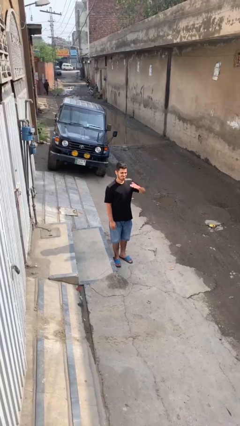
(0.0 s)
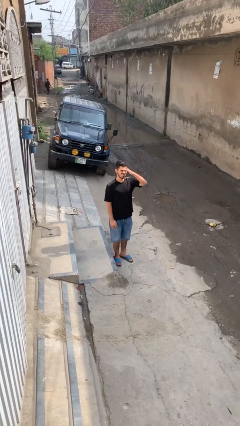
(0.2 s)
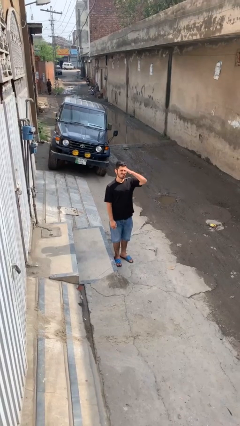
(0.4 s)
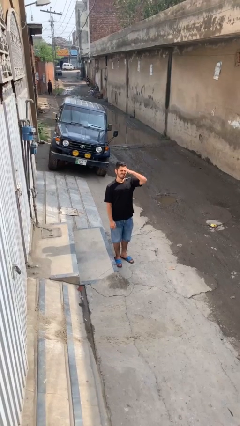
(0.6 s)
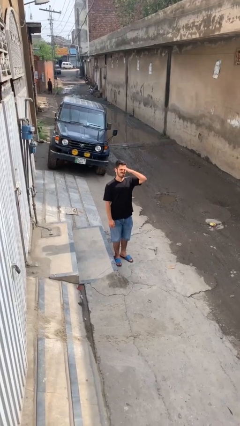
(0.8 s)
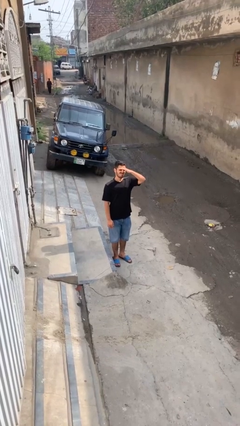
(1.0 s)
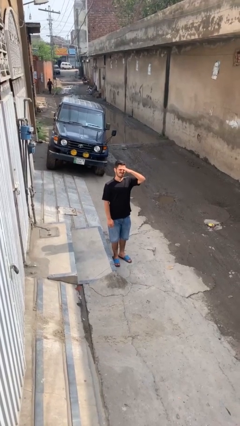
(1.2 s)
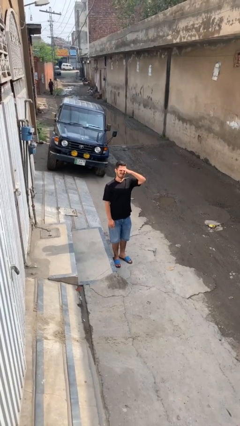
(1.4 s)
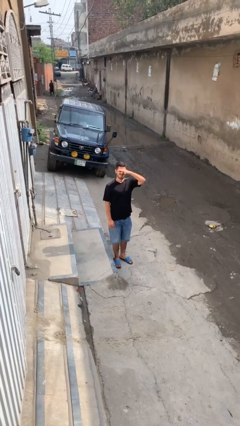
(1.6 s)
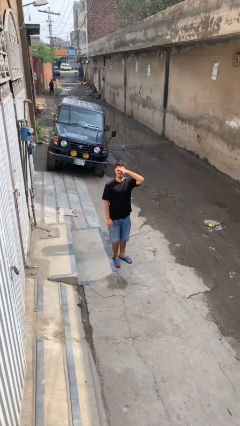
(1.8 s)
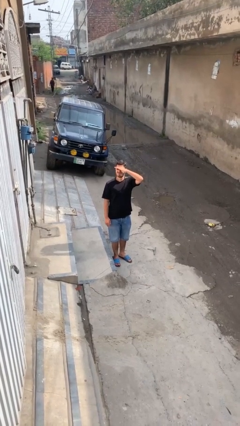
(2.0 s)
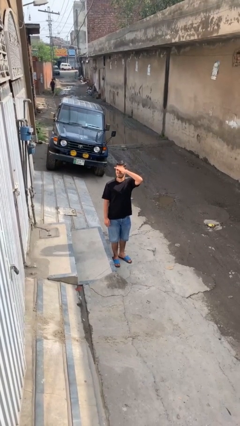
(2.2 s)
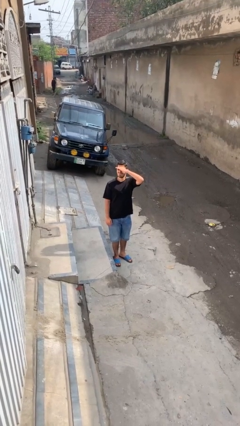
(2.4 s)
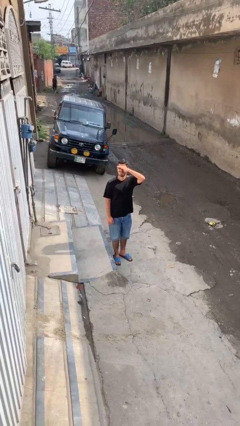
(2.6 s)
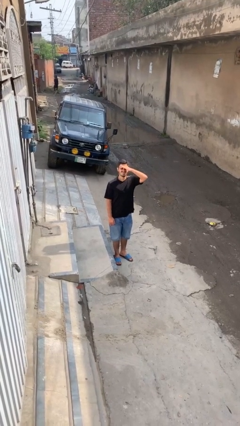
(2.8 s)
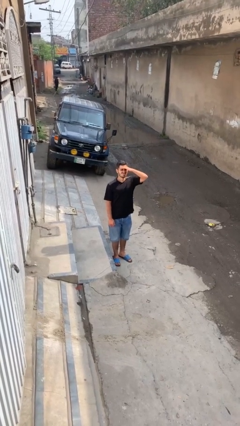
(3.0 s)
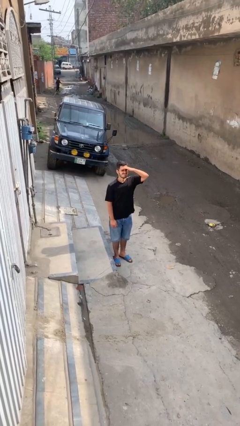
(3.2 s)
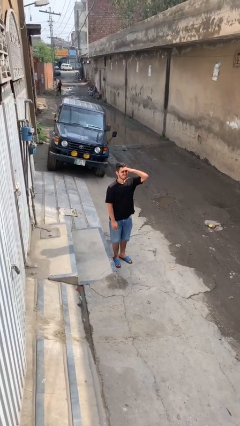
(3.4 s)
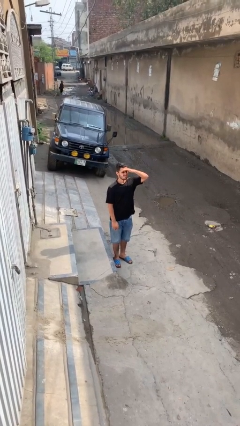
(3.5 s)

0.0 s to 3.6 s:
person shades eyes

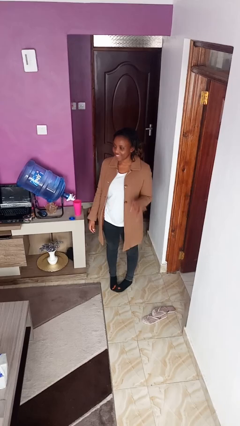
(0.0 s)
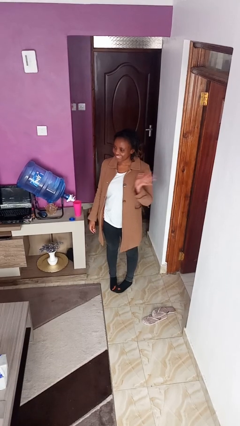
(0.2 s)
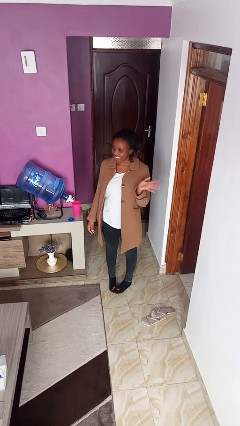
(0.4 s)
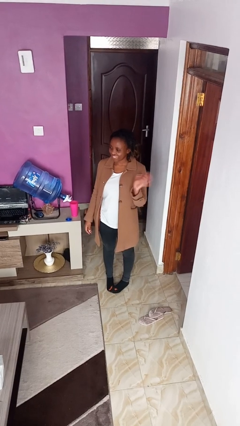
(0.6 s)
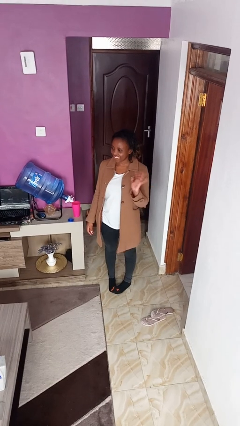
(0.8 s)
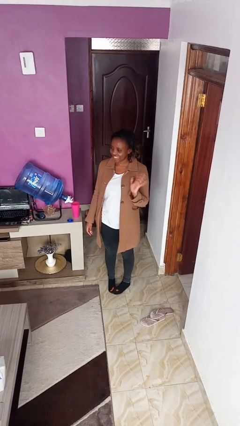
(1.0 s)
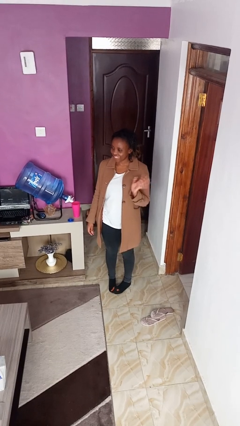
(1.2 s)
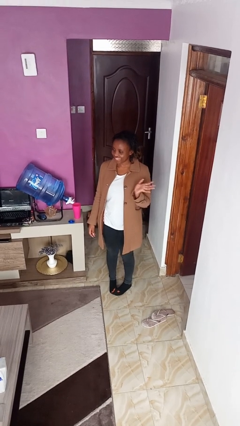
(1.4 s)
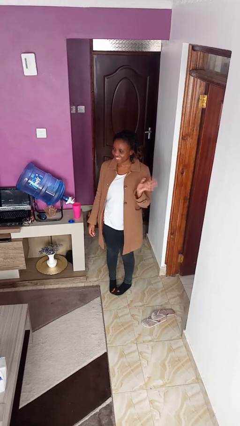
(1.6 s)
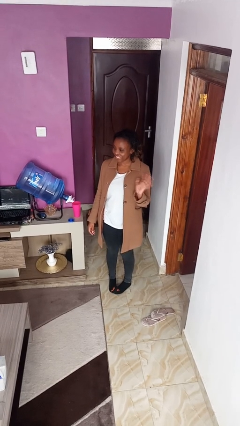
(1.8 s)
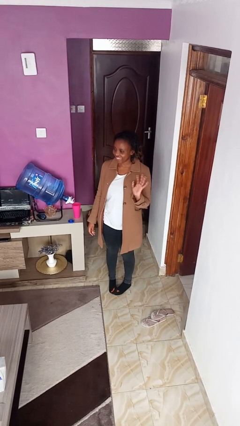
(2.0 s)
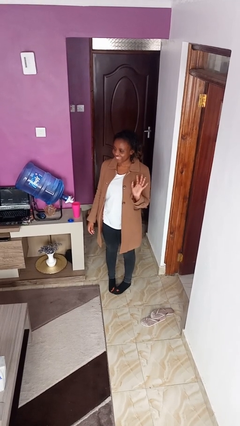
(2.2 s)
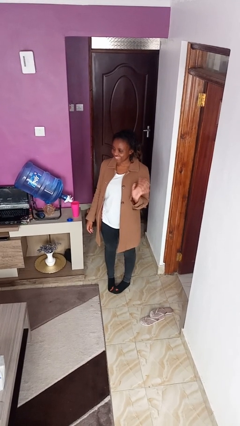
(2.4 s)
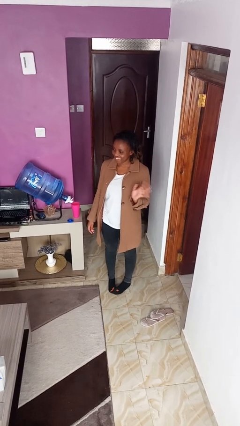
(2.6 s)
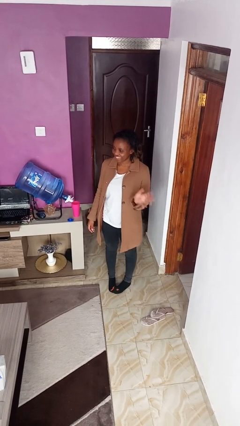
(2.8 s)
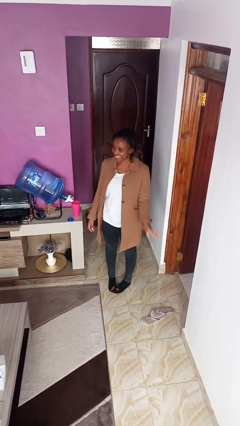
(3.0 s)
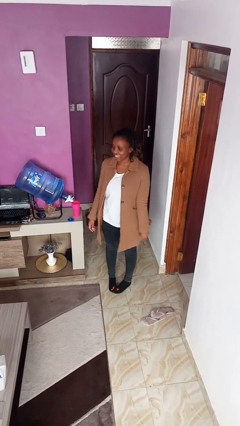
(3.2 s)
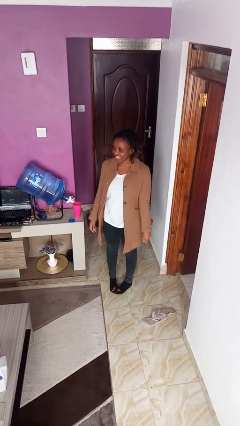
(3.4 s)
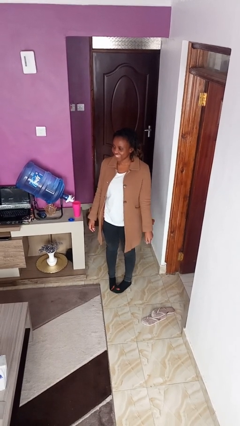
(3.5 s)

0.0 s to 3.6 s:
person waves at person

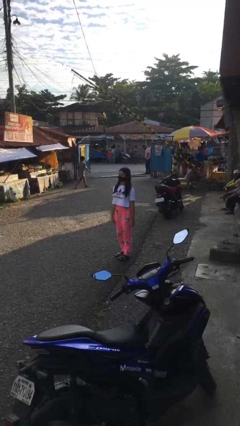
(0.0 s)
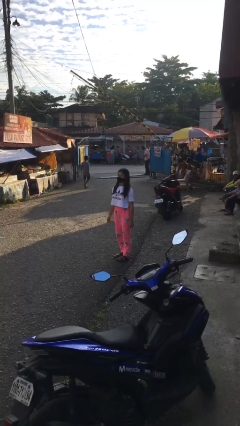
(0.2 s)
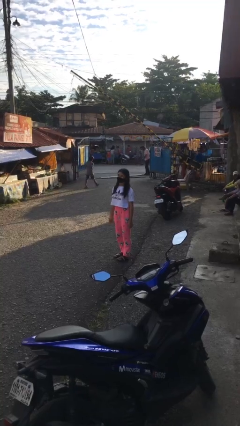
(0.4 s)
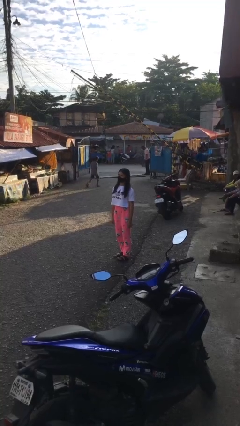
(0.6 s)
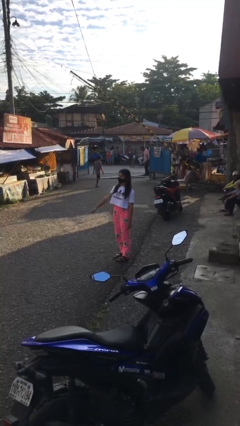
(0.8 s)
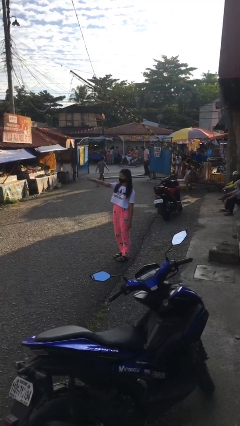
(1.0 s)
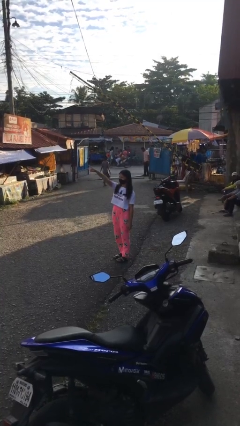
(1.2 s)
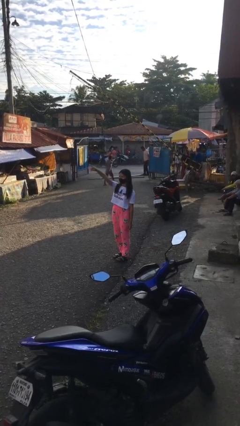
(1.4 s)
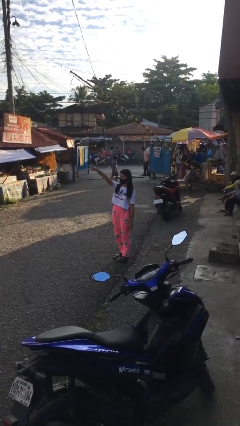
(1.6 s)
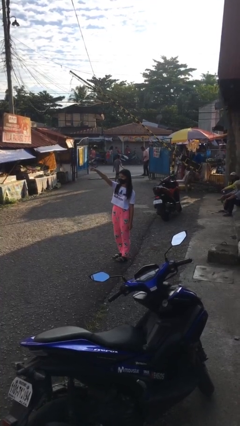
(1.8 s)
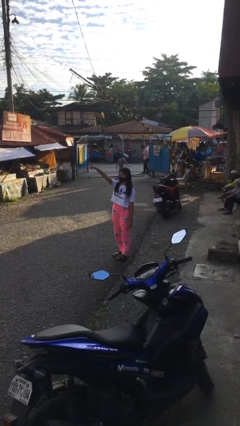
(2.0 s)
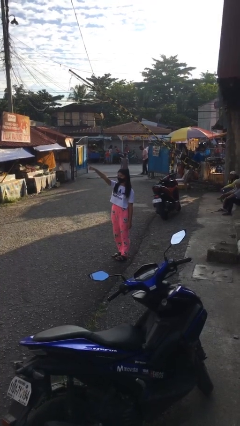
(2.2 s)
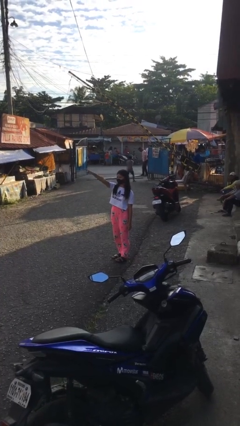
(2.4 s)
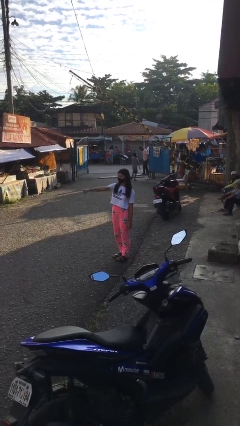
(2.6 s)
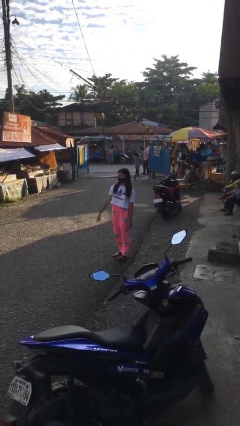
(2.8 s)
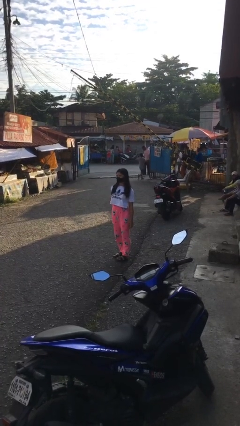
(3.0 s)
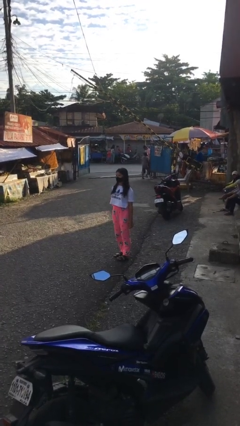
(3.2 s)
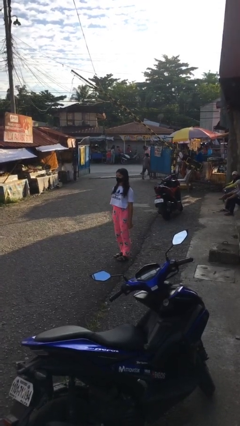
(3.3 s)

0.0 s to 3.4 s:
person points at person

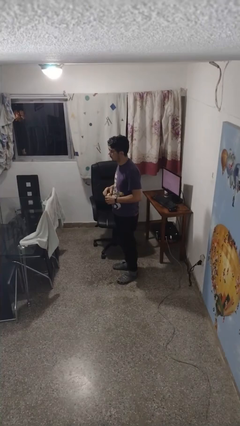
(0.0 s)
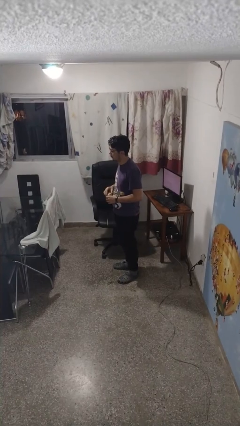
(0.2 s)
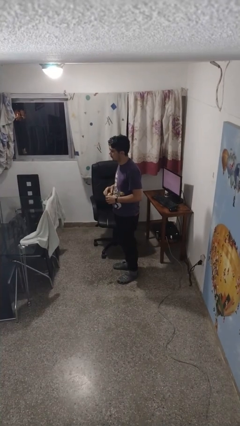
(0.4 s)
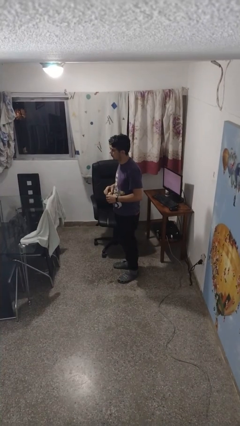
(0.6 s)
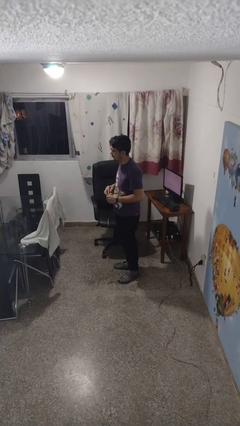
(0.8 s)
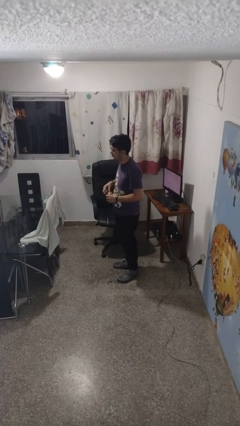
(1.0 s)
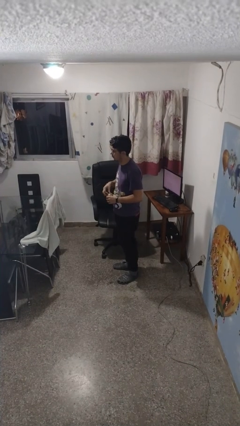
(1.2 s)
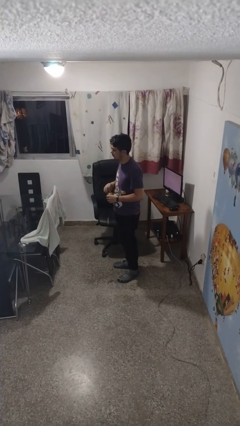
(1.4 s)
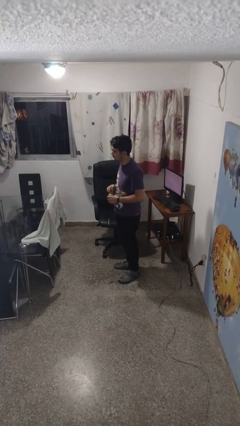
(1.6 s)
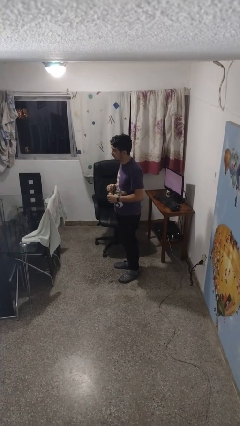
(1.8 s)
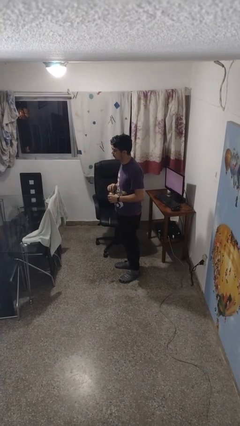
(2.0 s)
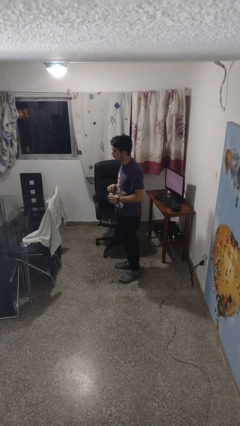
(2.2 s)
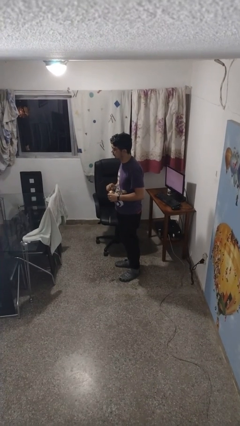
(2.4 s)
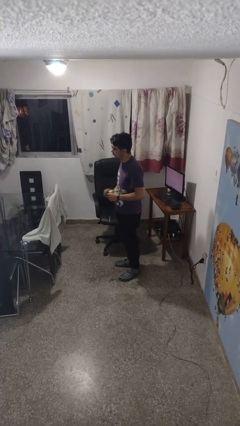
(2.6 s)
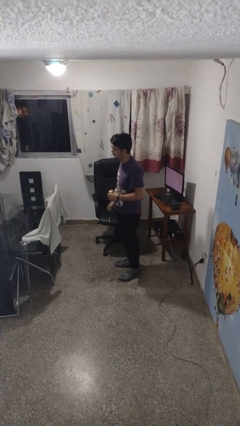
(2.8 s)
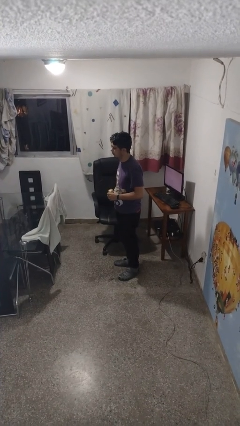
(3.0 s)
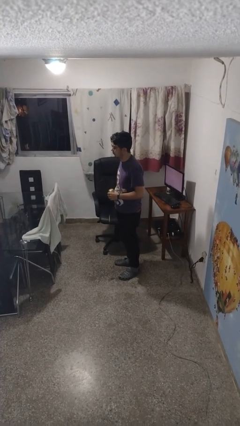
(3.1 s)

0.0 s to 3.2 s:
person opens beverage can

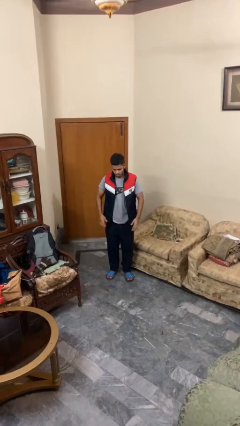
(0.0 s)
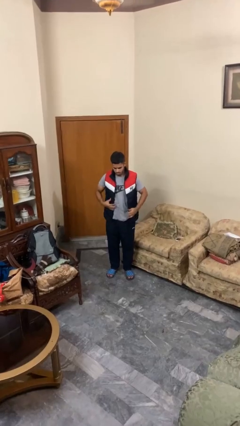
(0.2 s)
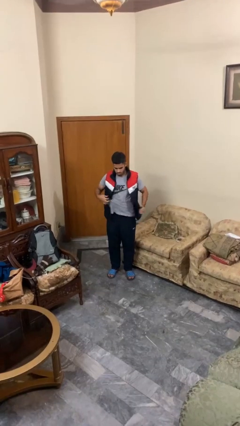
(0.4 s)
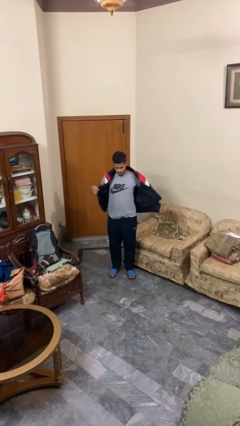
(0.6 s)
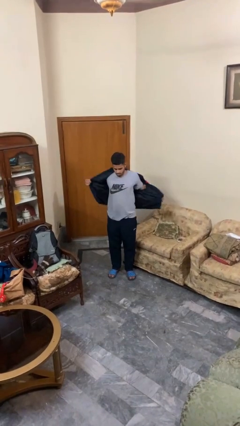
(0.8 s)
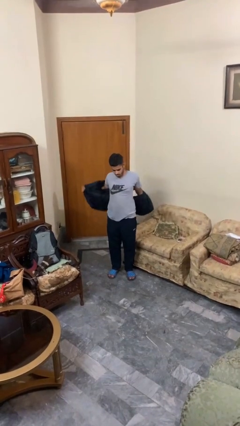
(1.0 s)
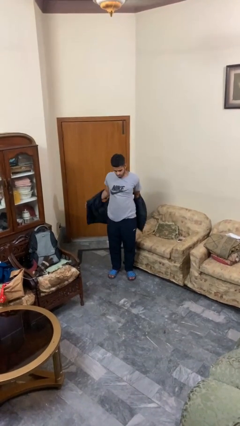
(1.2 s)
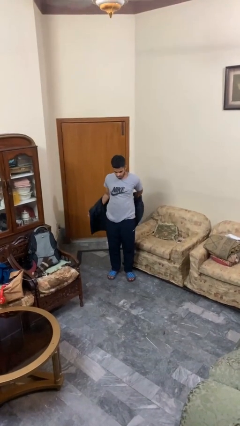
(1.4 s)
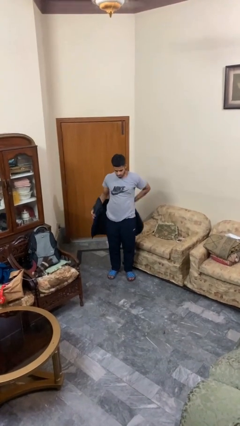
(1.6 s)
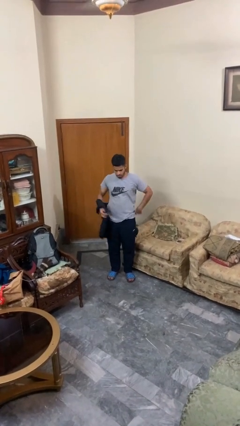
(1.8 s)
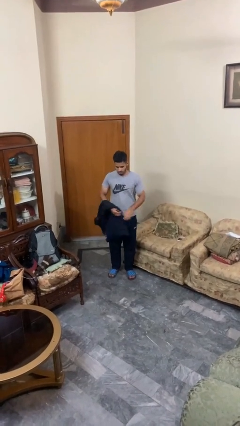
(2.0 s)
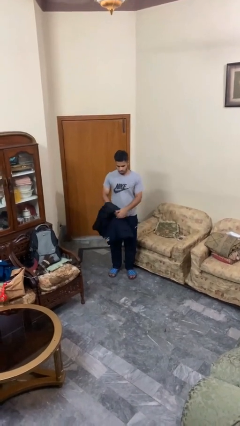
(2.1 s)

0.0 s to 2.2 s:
person takes off jacket

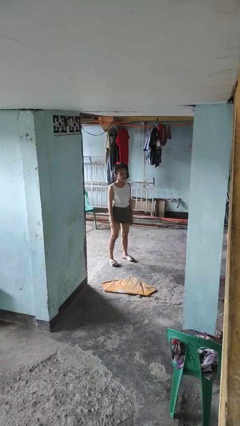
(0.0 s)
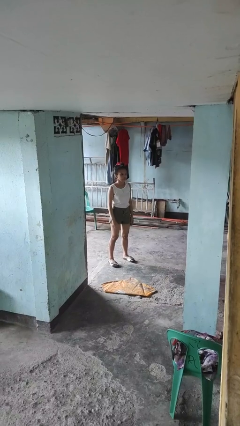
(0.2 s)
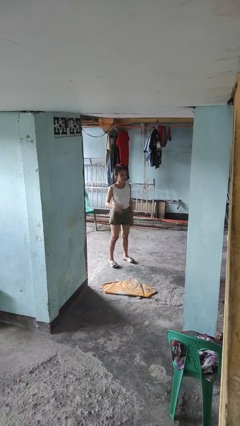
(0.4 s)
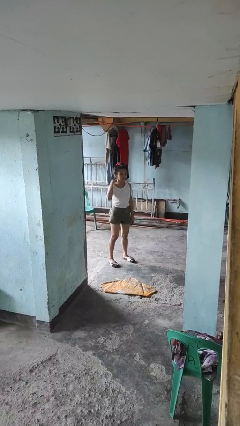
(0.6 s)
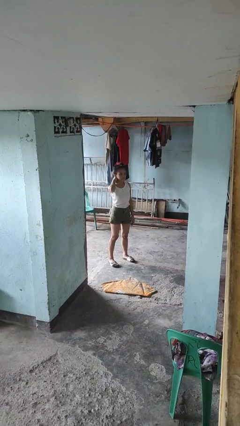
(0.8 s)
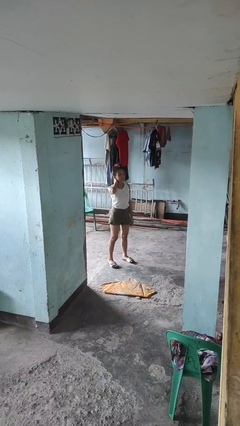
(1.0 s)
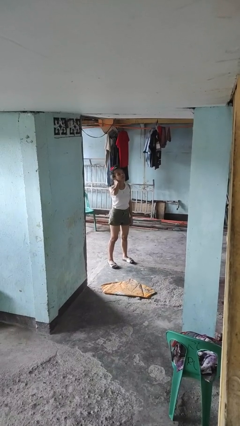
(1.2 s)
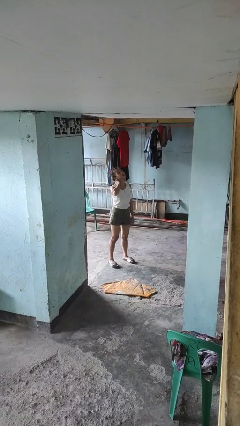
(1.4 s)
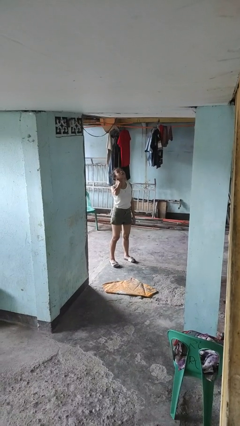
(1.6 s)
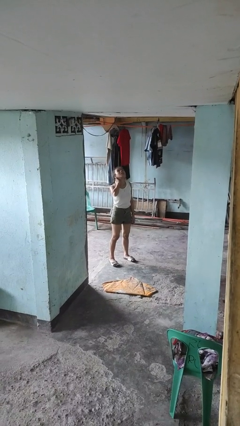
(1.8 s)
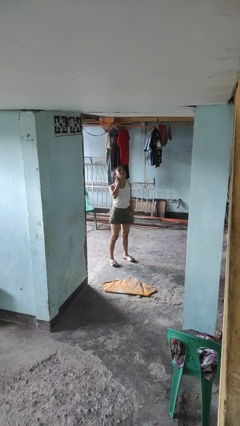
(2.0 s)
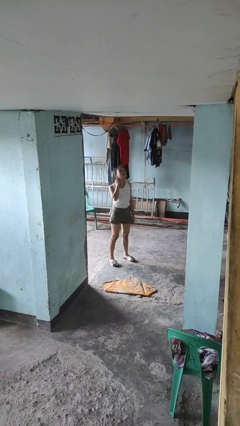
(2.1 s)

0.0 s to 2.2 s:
person rubs neck
